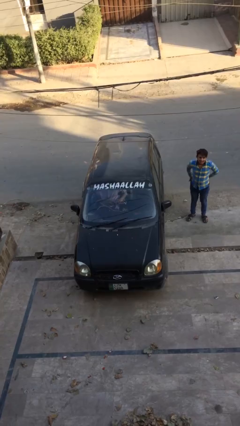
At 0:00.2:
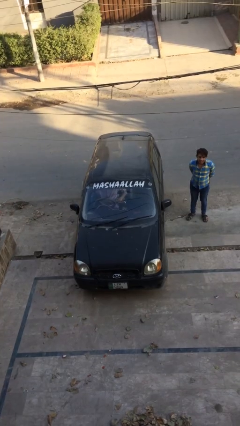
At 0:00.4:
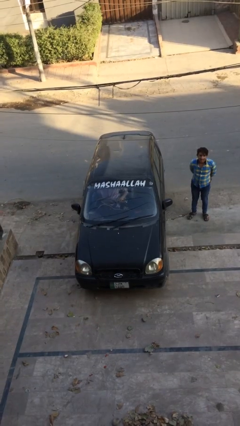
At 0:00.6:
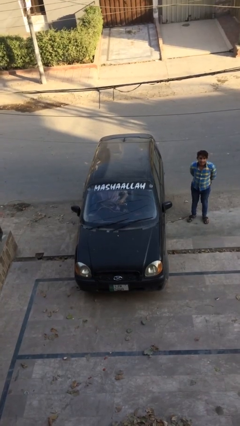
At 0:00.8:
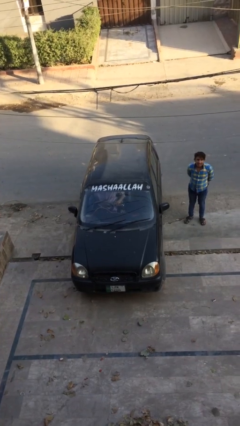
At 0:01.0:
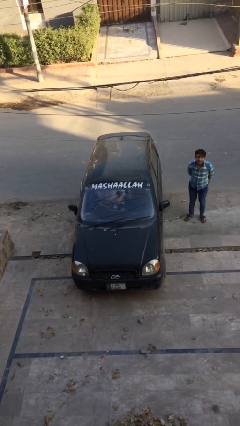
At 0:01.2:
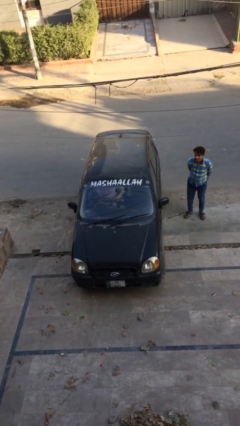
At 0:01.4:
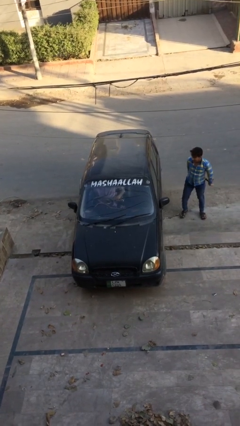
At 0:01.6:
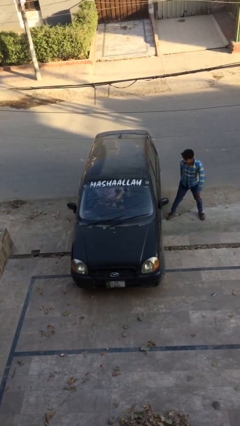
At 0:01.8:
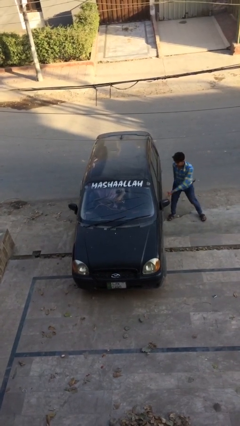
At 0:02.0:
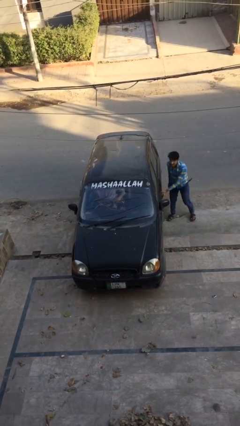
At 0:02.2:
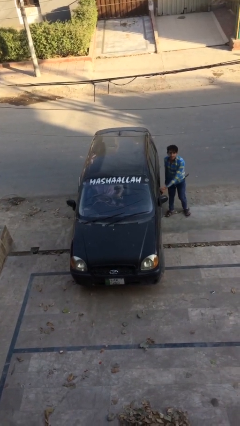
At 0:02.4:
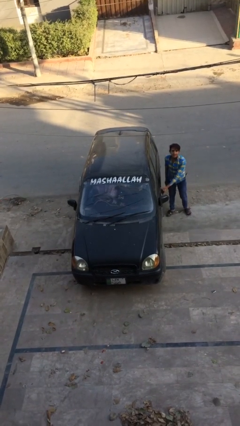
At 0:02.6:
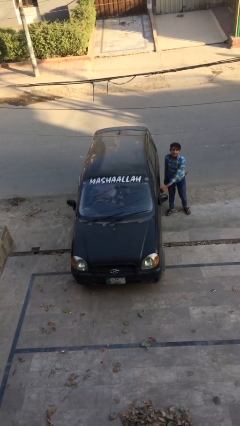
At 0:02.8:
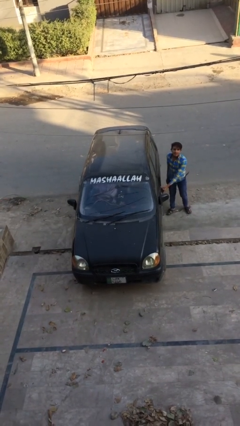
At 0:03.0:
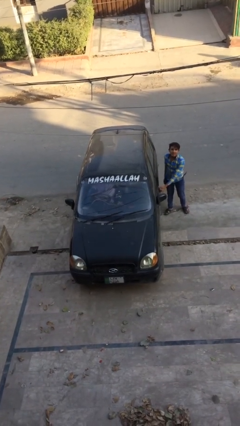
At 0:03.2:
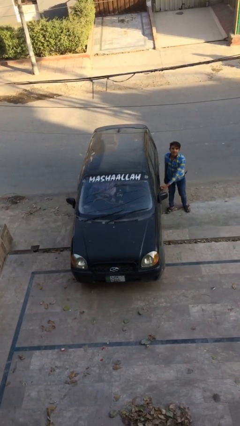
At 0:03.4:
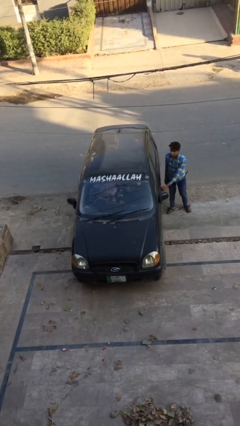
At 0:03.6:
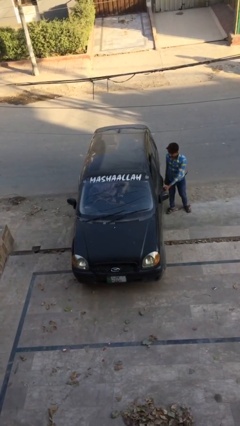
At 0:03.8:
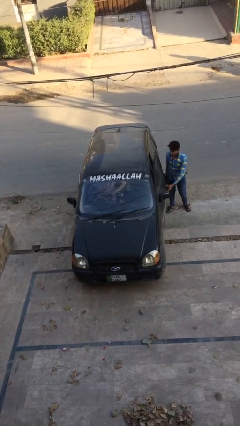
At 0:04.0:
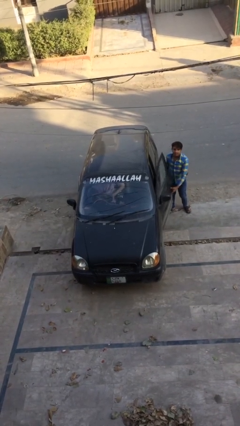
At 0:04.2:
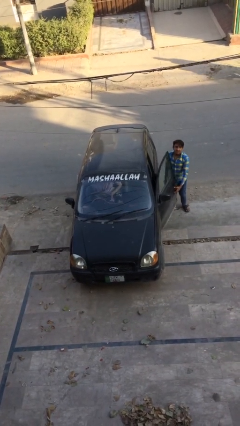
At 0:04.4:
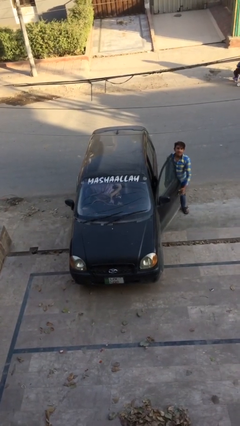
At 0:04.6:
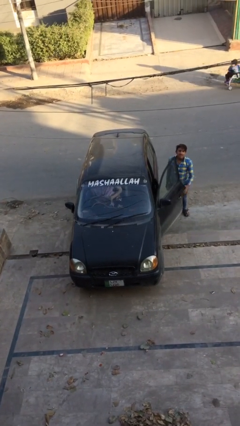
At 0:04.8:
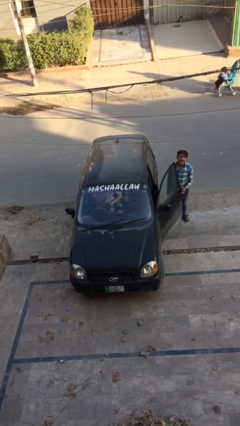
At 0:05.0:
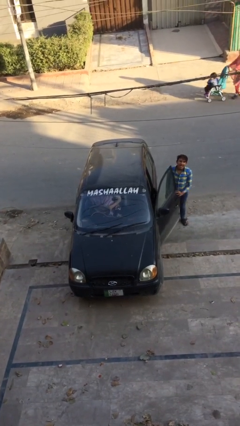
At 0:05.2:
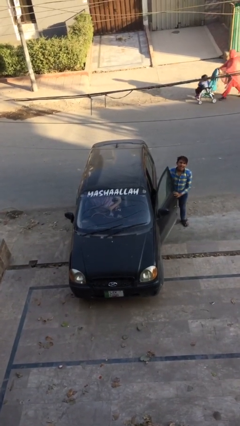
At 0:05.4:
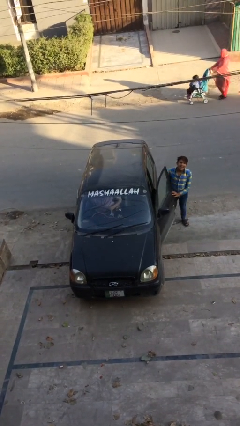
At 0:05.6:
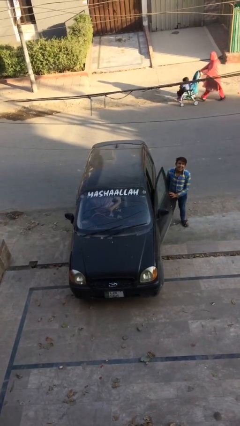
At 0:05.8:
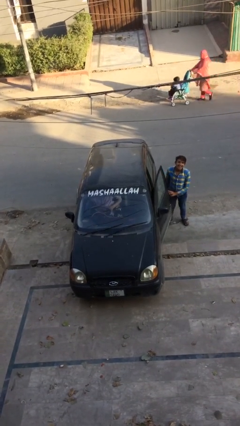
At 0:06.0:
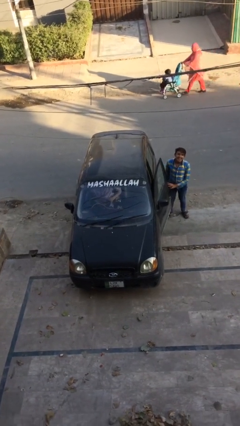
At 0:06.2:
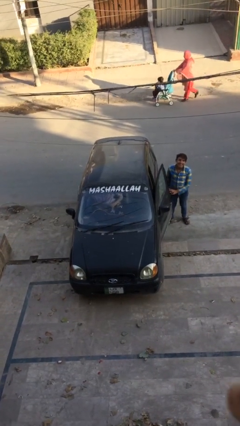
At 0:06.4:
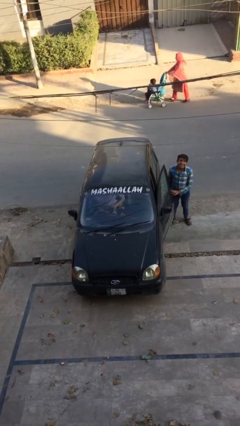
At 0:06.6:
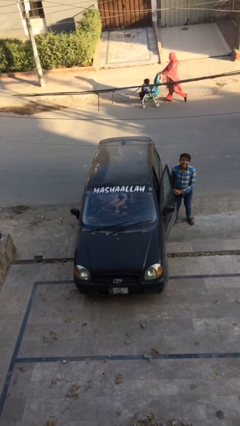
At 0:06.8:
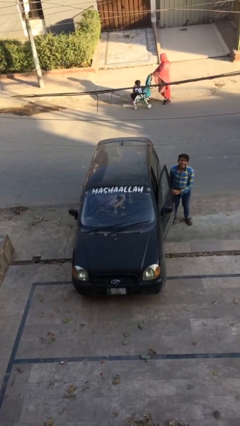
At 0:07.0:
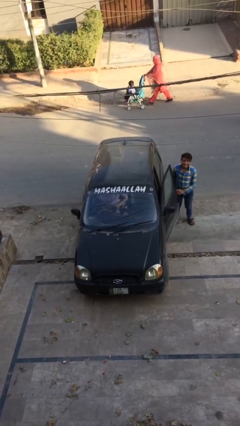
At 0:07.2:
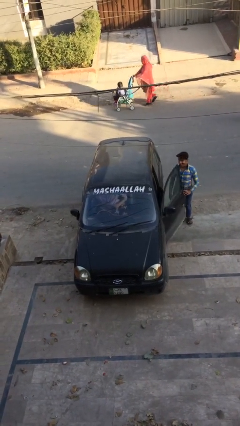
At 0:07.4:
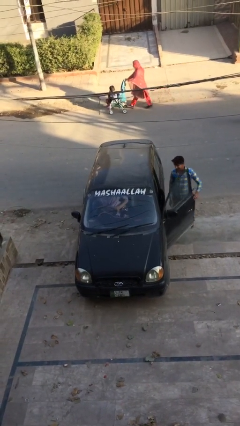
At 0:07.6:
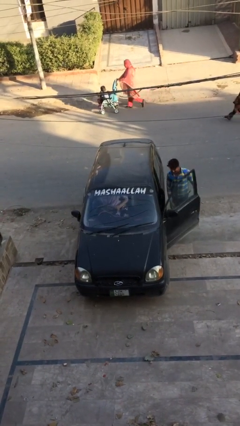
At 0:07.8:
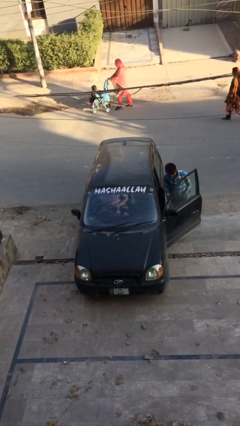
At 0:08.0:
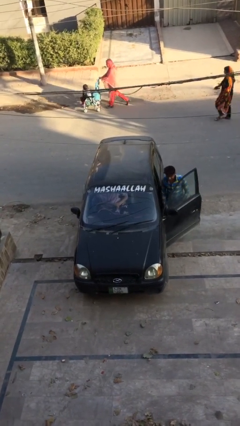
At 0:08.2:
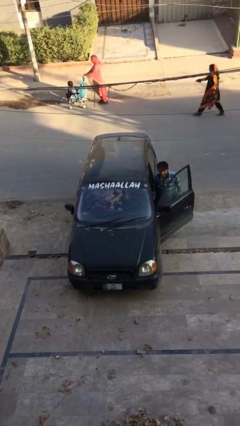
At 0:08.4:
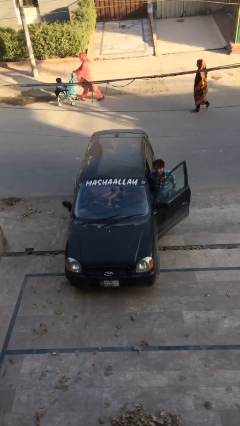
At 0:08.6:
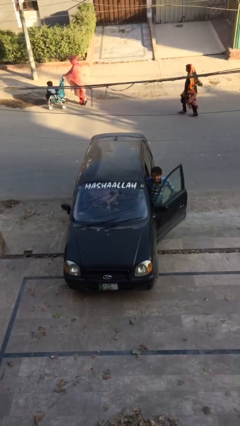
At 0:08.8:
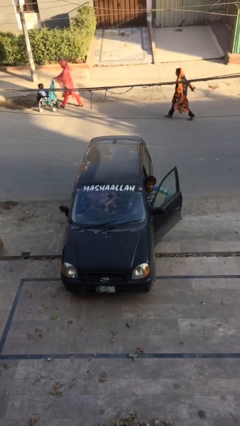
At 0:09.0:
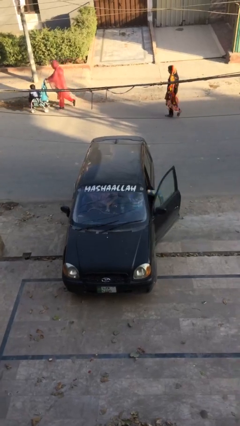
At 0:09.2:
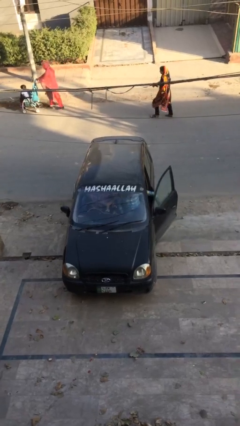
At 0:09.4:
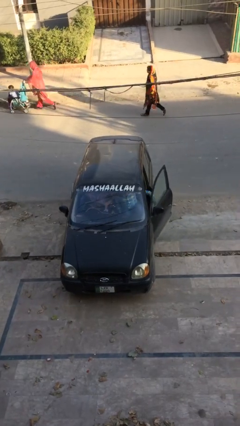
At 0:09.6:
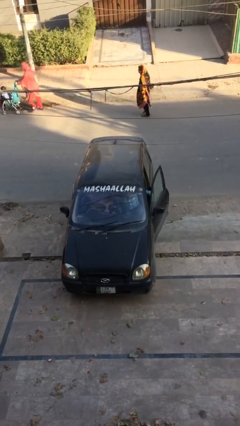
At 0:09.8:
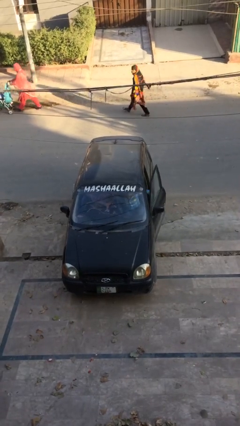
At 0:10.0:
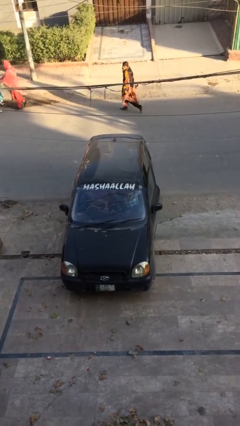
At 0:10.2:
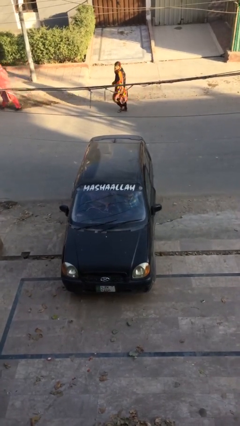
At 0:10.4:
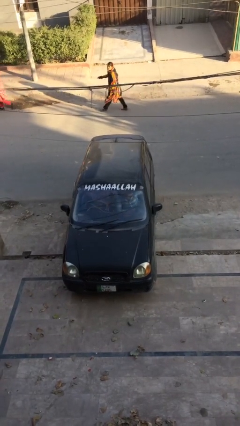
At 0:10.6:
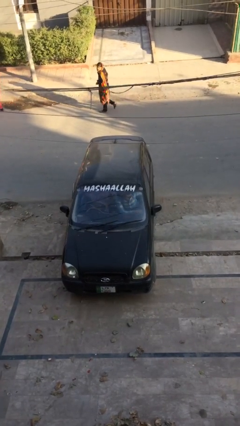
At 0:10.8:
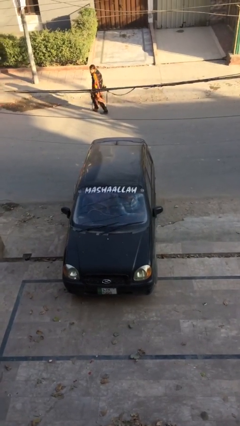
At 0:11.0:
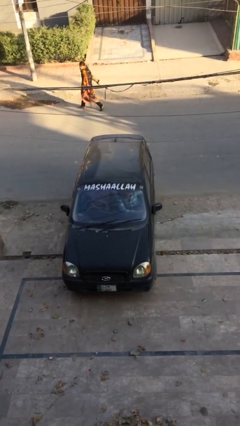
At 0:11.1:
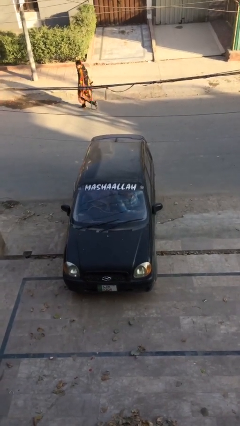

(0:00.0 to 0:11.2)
car picks up person

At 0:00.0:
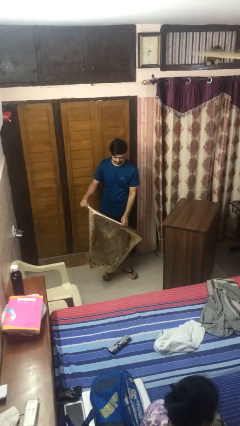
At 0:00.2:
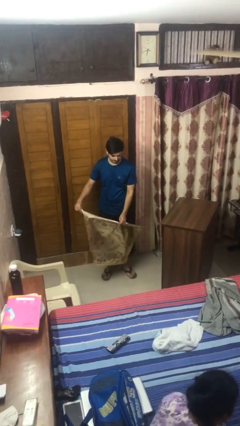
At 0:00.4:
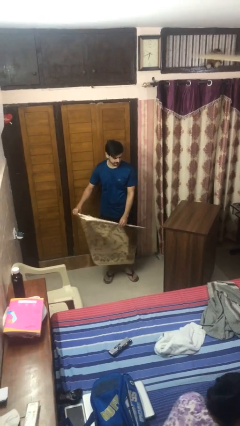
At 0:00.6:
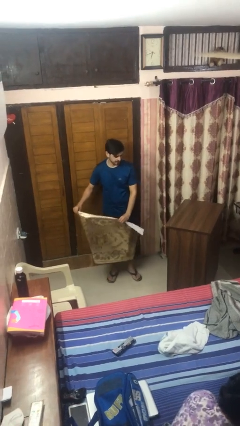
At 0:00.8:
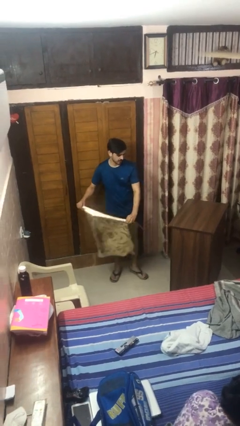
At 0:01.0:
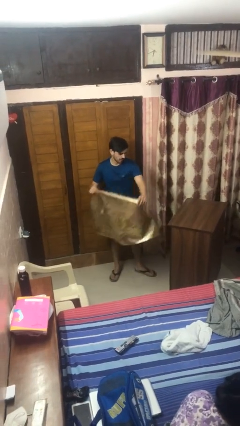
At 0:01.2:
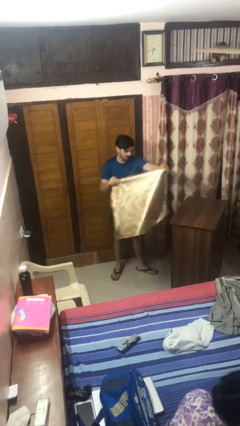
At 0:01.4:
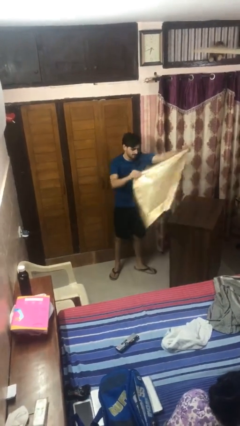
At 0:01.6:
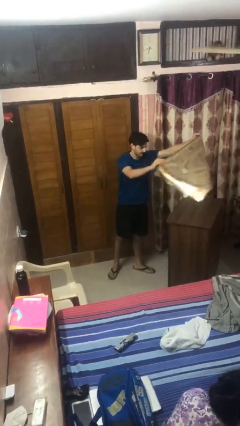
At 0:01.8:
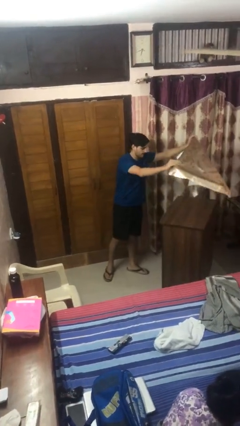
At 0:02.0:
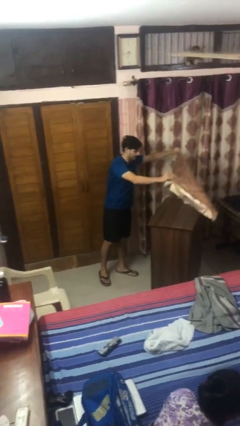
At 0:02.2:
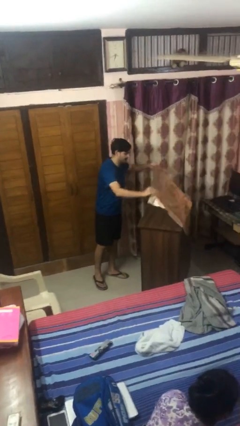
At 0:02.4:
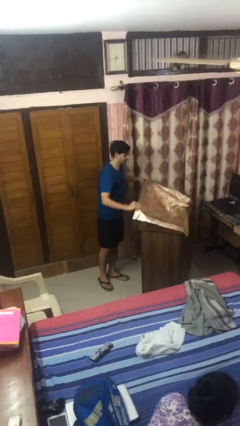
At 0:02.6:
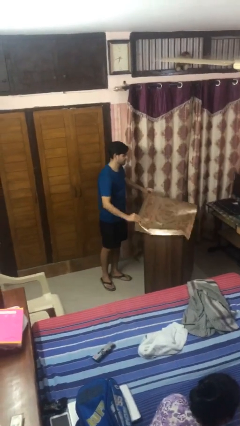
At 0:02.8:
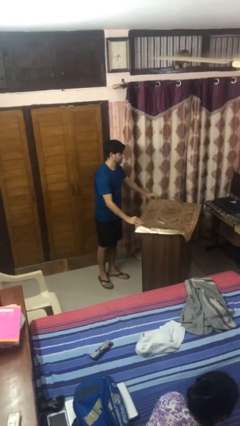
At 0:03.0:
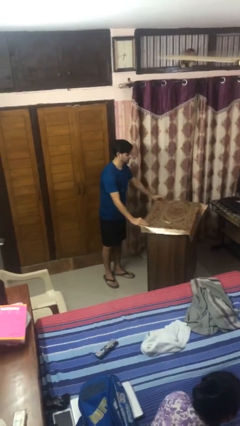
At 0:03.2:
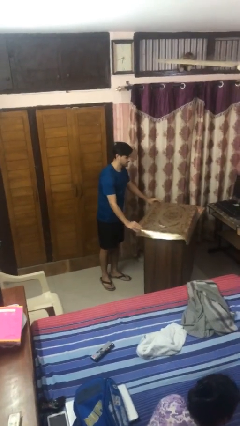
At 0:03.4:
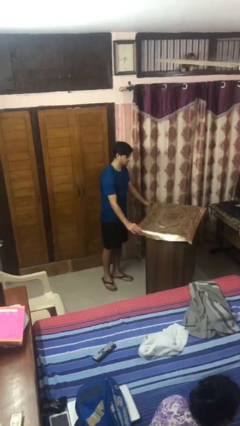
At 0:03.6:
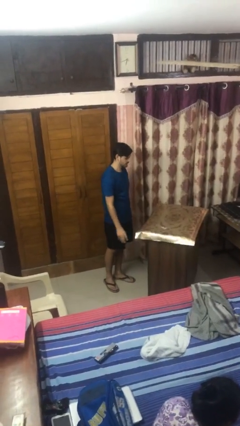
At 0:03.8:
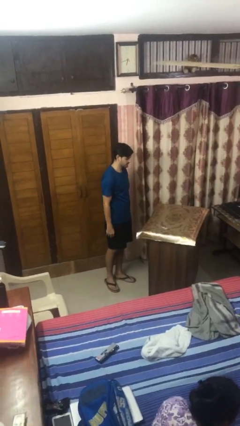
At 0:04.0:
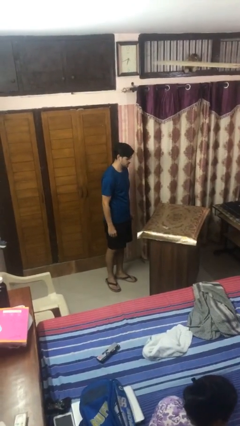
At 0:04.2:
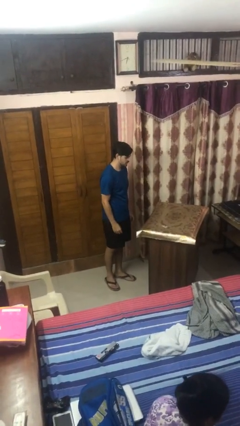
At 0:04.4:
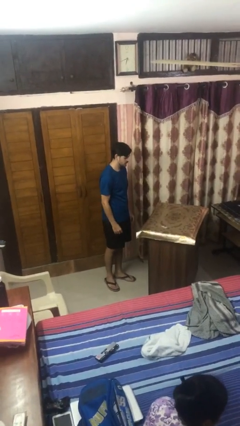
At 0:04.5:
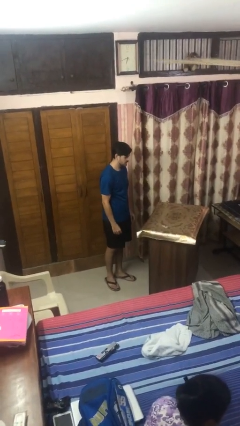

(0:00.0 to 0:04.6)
person spreads tablecloth

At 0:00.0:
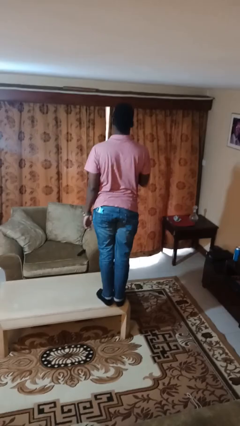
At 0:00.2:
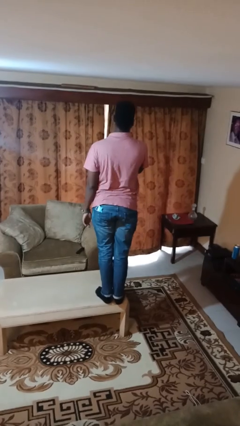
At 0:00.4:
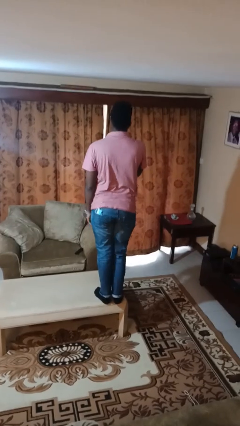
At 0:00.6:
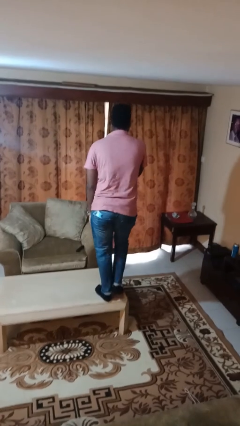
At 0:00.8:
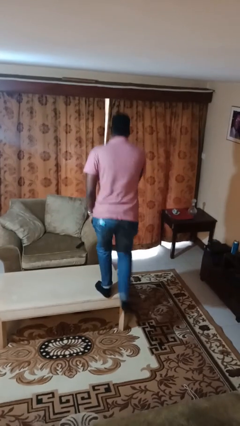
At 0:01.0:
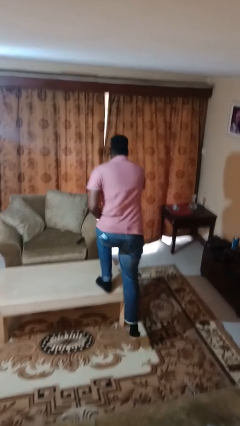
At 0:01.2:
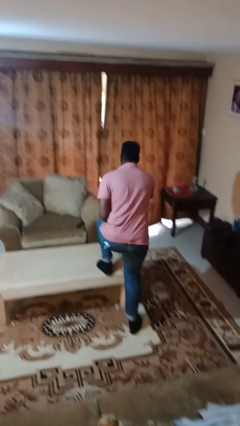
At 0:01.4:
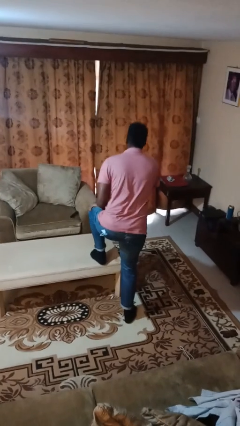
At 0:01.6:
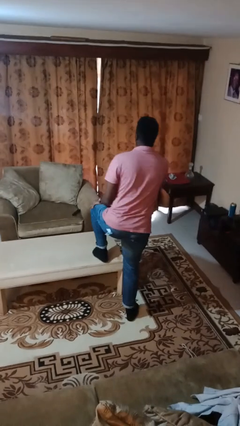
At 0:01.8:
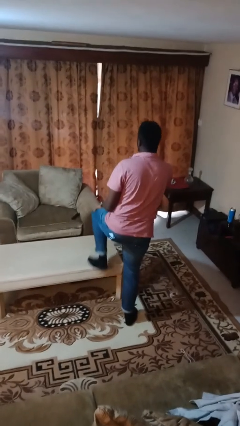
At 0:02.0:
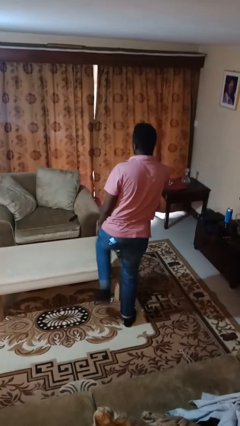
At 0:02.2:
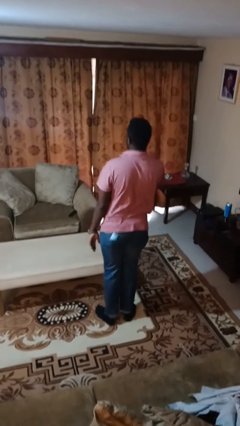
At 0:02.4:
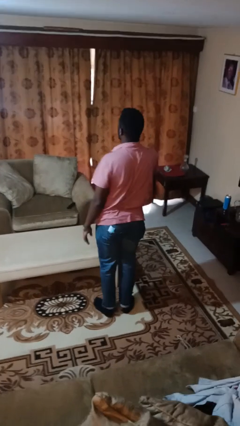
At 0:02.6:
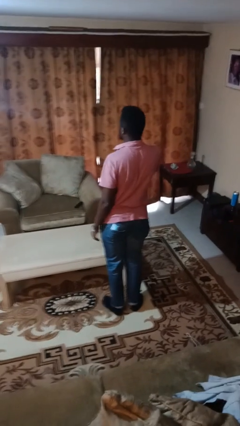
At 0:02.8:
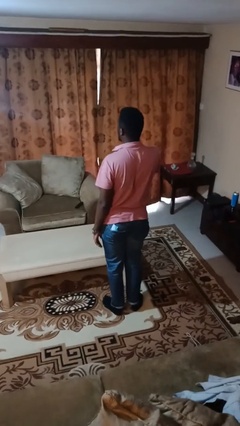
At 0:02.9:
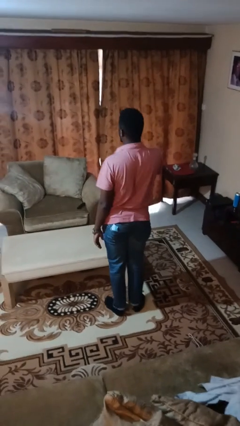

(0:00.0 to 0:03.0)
person climbs off table
